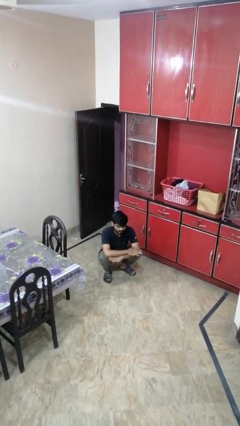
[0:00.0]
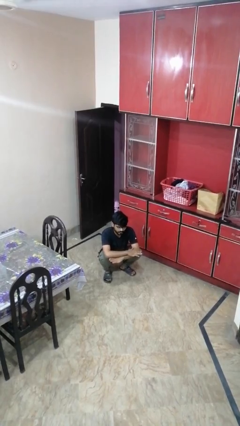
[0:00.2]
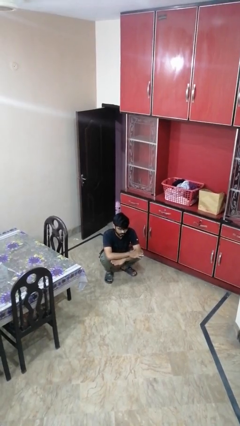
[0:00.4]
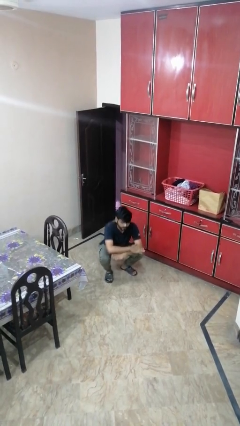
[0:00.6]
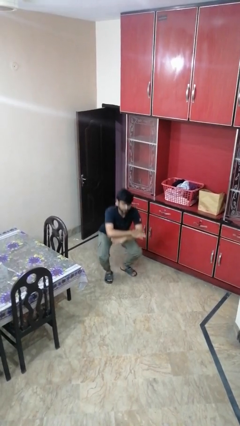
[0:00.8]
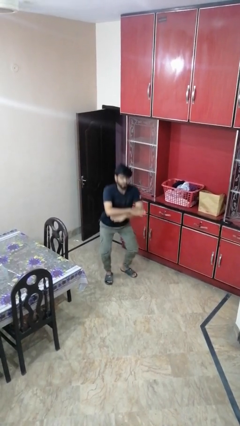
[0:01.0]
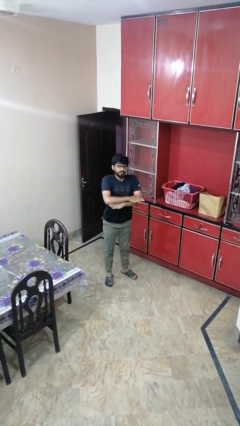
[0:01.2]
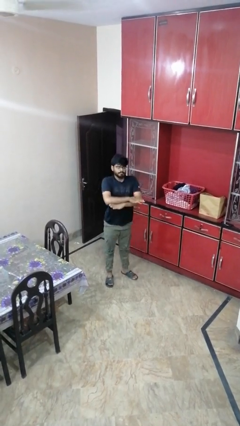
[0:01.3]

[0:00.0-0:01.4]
person stands up

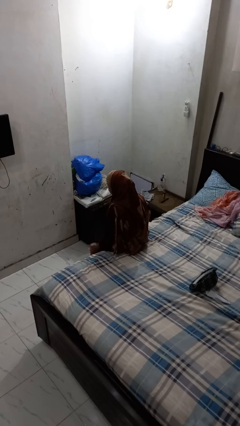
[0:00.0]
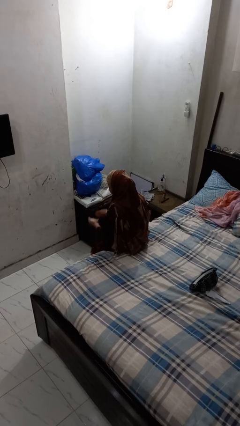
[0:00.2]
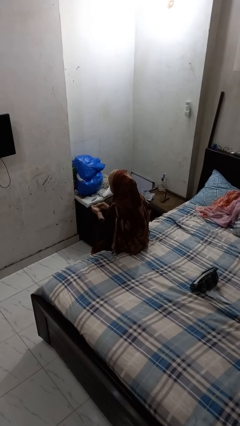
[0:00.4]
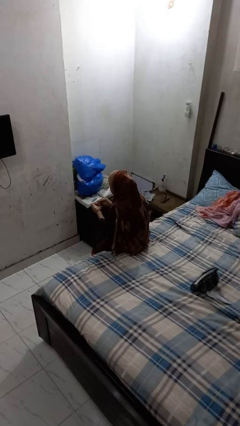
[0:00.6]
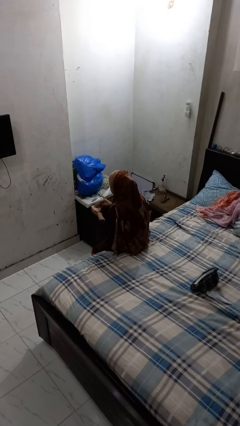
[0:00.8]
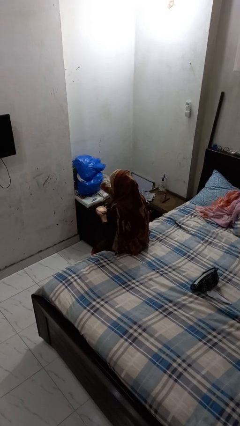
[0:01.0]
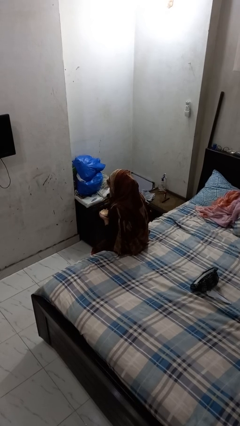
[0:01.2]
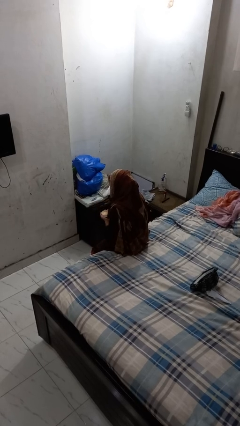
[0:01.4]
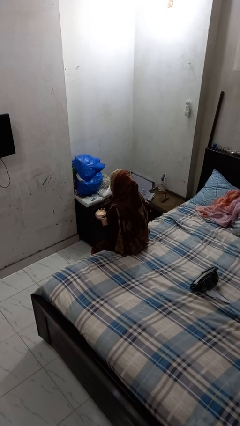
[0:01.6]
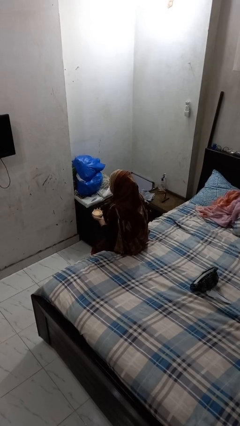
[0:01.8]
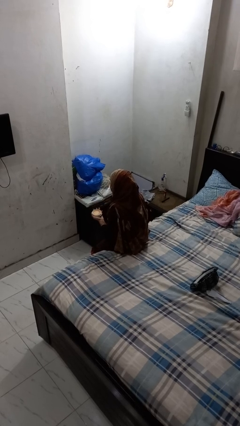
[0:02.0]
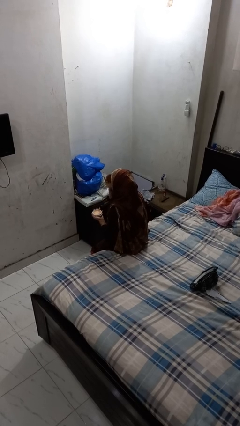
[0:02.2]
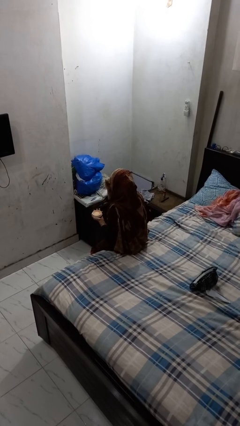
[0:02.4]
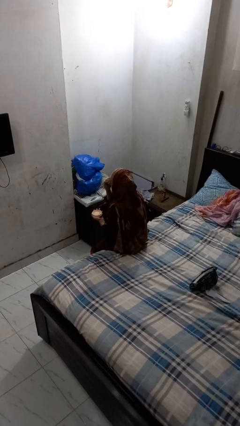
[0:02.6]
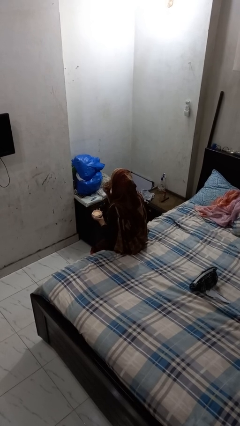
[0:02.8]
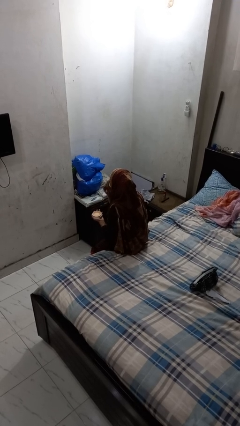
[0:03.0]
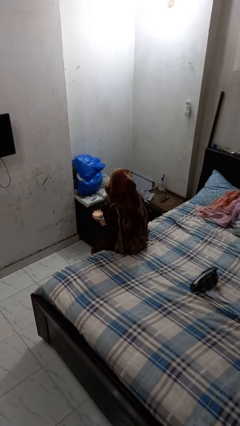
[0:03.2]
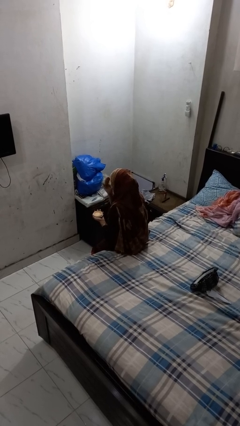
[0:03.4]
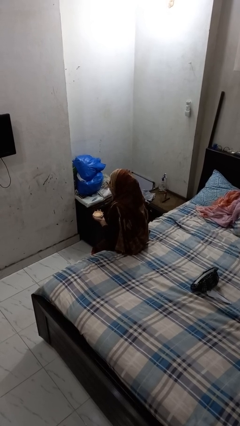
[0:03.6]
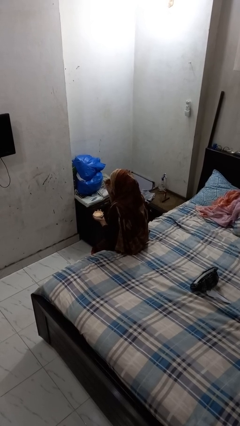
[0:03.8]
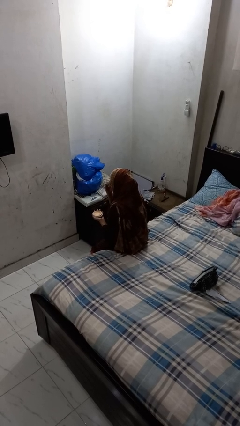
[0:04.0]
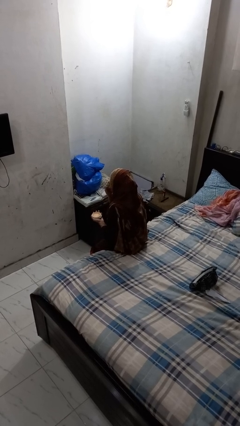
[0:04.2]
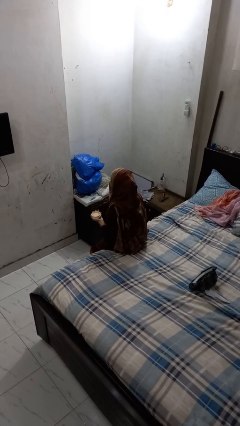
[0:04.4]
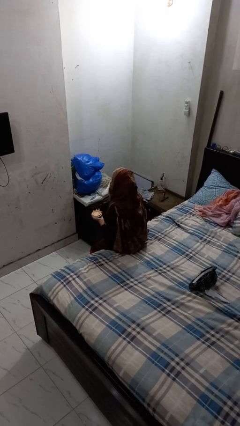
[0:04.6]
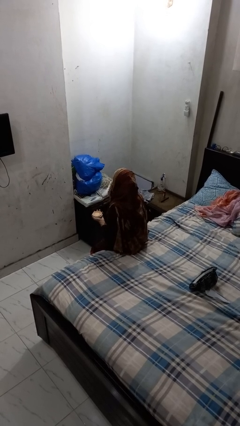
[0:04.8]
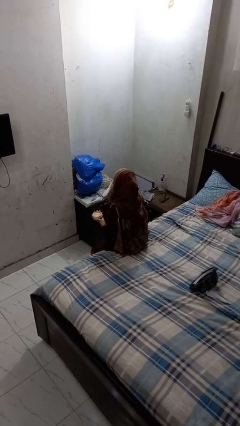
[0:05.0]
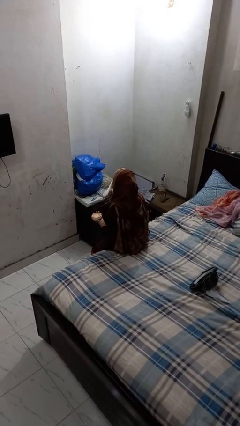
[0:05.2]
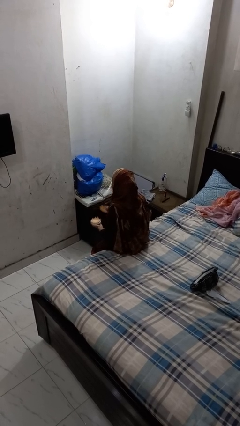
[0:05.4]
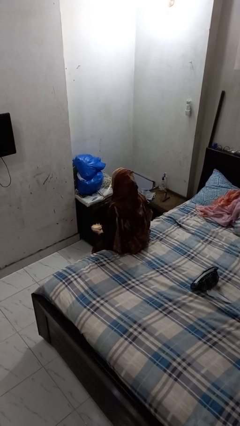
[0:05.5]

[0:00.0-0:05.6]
person applies foundation makeup

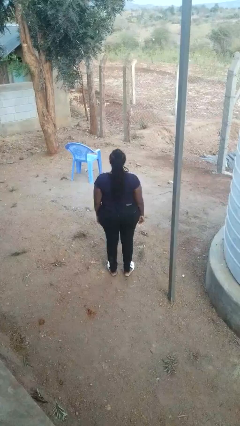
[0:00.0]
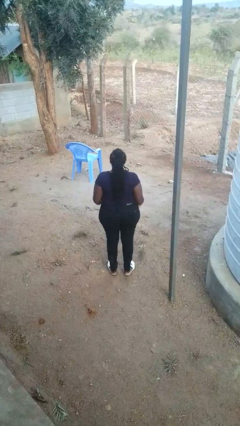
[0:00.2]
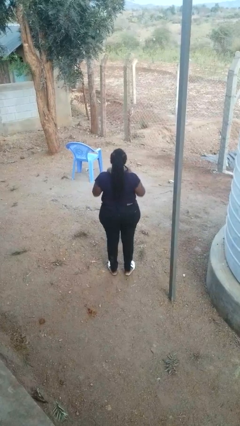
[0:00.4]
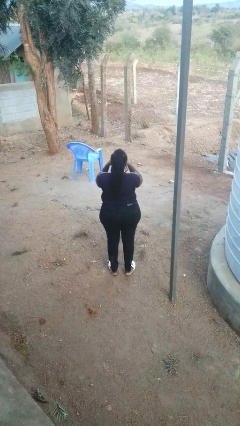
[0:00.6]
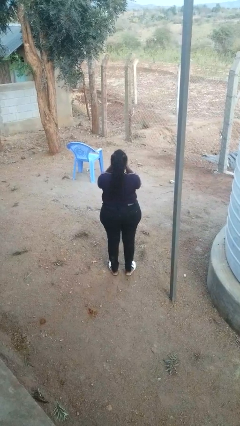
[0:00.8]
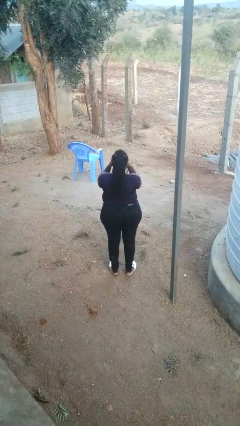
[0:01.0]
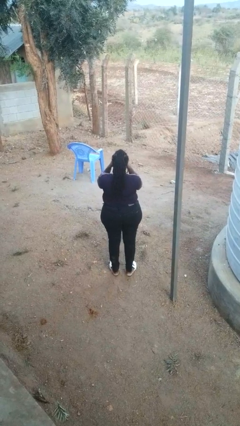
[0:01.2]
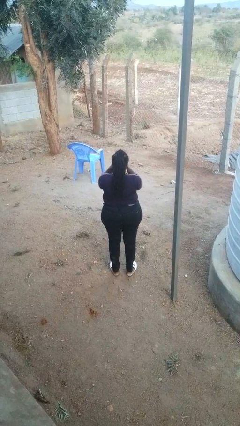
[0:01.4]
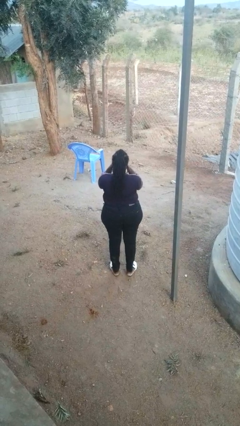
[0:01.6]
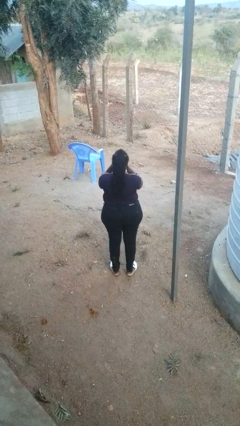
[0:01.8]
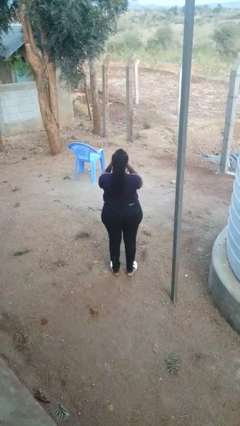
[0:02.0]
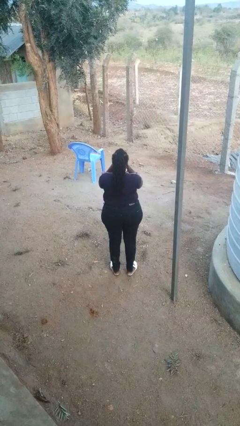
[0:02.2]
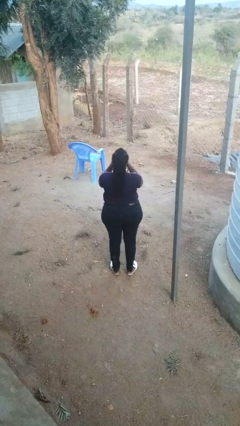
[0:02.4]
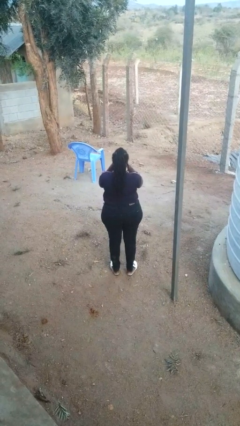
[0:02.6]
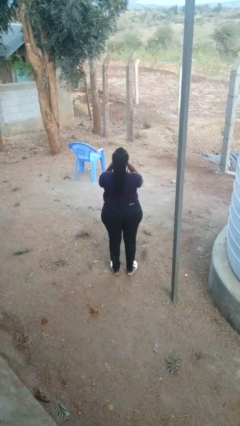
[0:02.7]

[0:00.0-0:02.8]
person rubs eyes

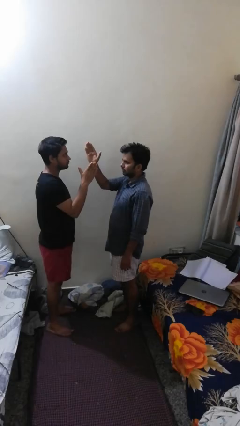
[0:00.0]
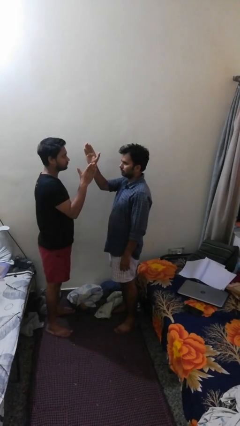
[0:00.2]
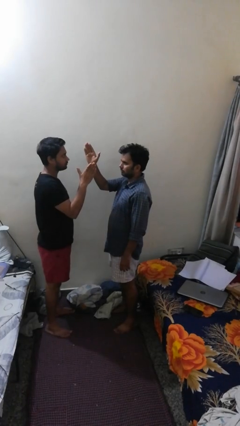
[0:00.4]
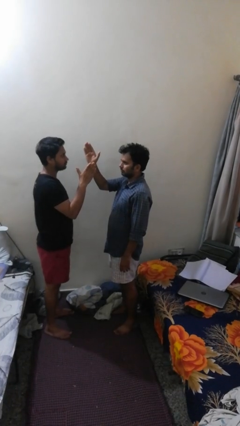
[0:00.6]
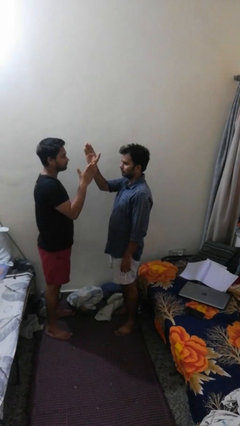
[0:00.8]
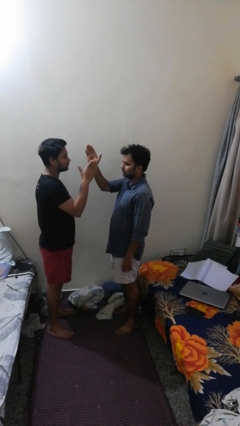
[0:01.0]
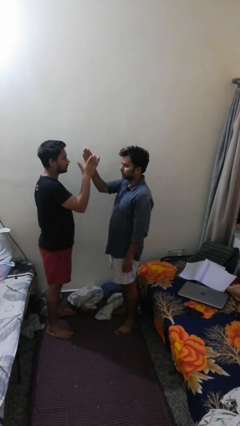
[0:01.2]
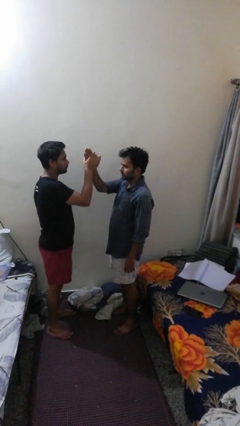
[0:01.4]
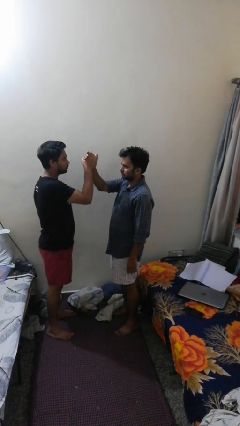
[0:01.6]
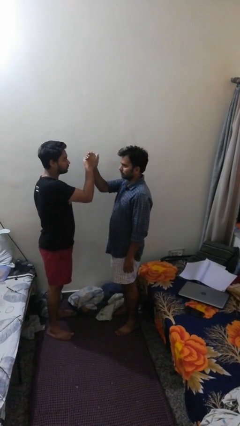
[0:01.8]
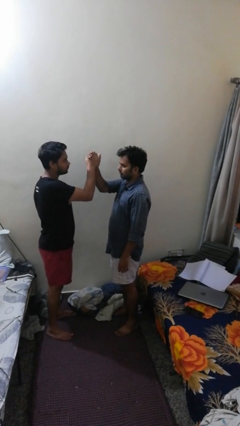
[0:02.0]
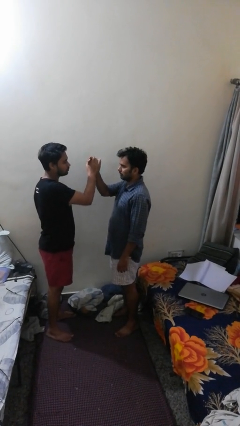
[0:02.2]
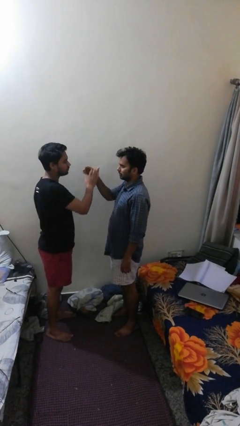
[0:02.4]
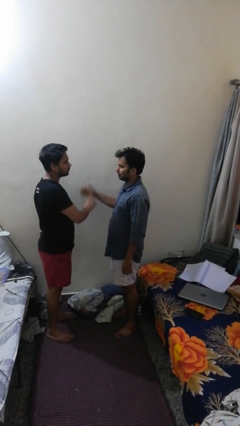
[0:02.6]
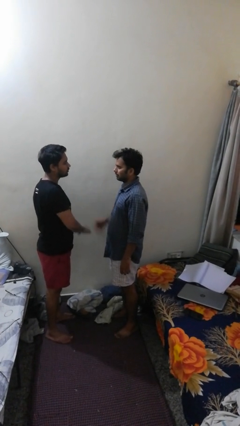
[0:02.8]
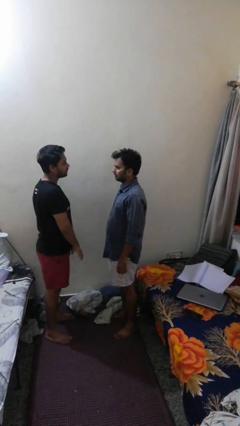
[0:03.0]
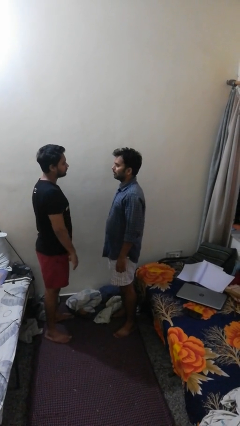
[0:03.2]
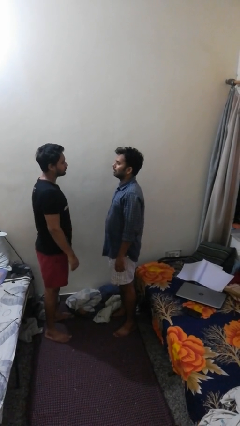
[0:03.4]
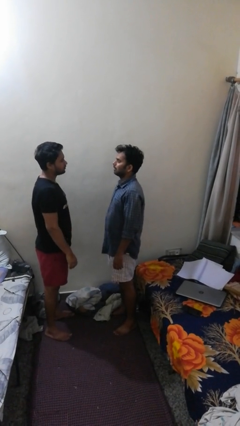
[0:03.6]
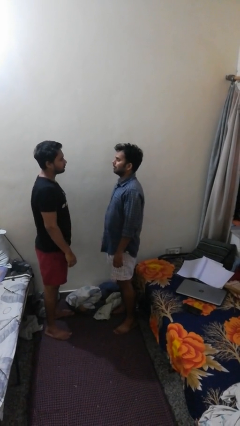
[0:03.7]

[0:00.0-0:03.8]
person highfives hand

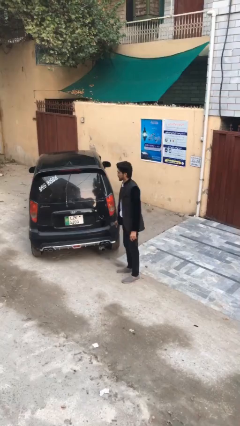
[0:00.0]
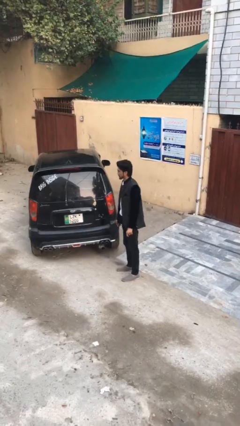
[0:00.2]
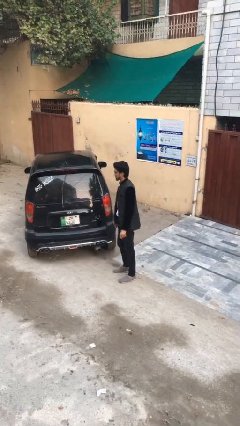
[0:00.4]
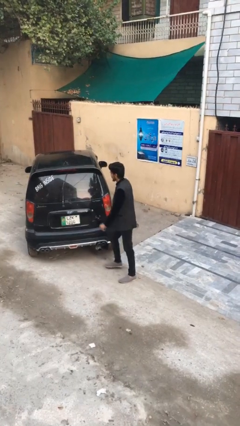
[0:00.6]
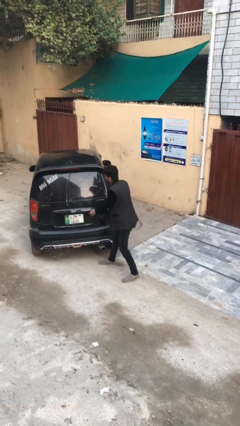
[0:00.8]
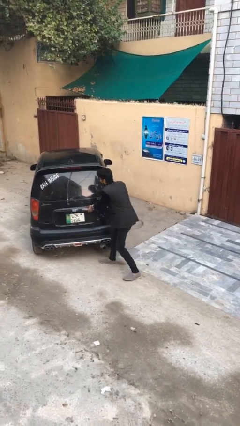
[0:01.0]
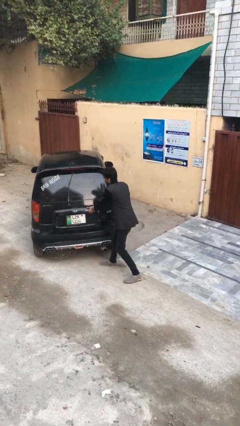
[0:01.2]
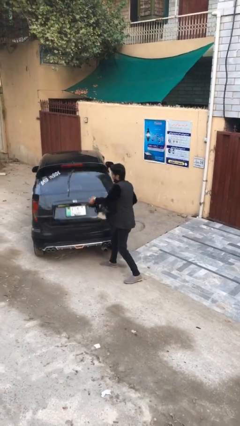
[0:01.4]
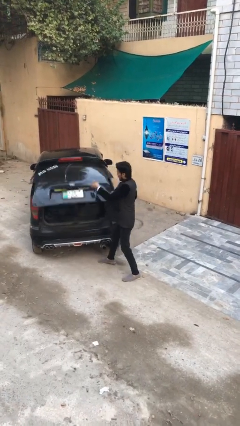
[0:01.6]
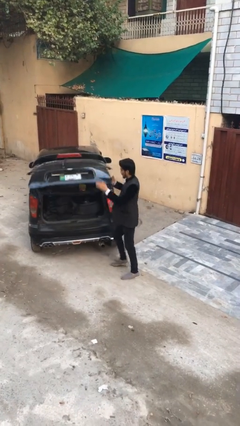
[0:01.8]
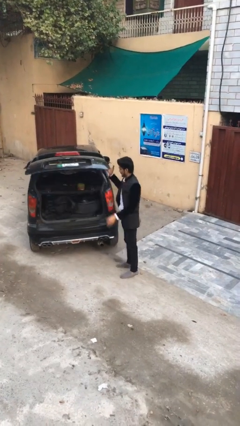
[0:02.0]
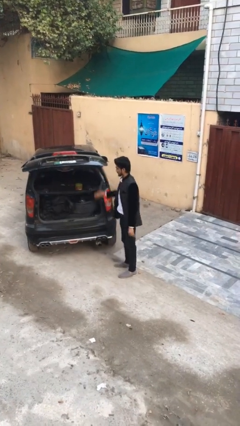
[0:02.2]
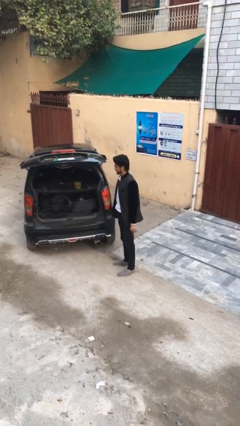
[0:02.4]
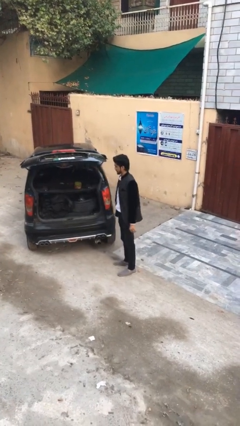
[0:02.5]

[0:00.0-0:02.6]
person opens car trunk

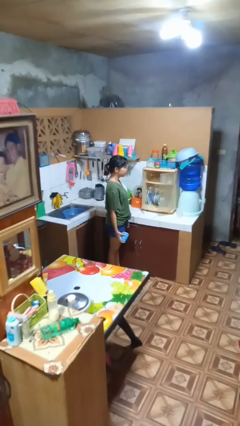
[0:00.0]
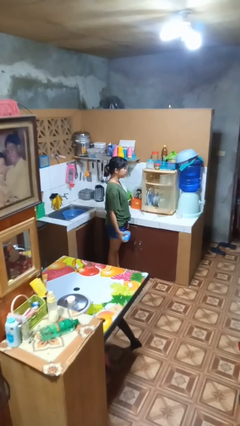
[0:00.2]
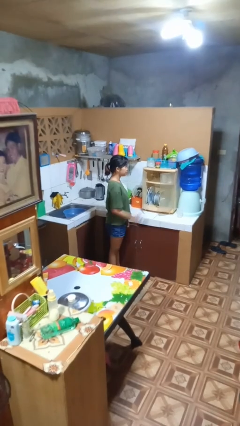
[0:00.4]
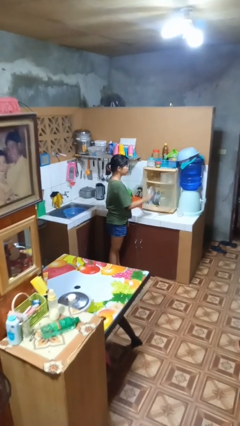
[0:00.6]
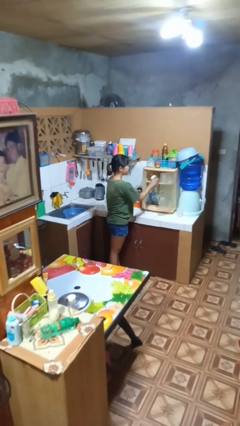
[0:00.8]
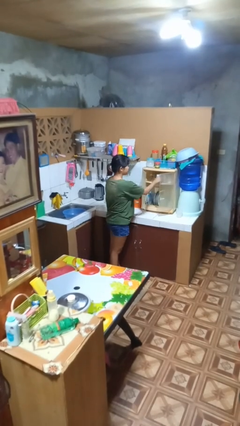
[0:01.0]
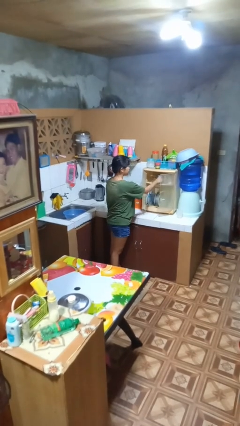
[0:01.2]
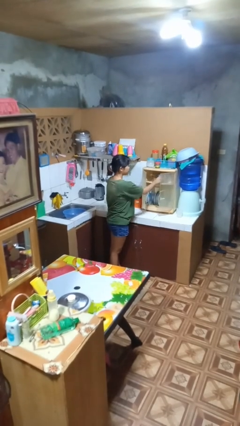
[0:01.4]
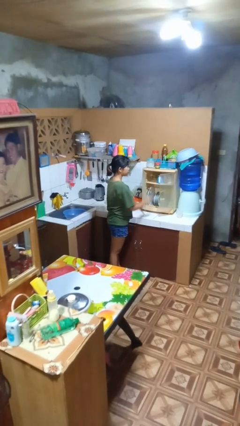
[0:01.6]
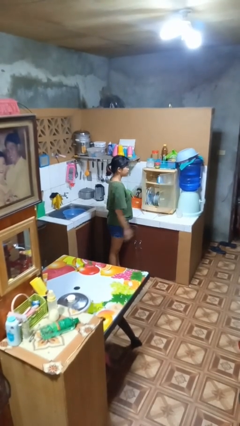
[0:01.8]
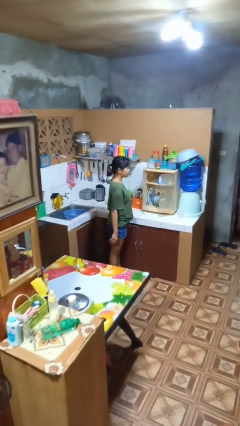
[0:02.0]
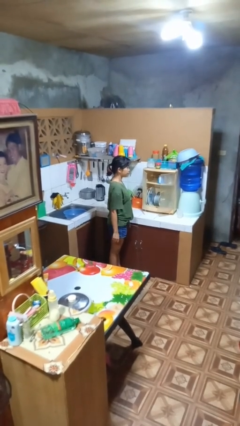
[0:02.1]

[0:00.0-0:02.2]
person puts object in cabinet
